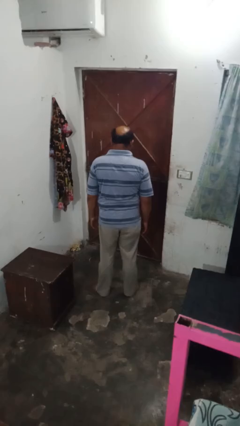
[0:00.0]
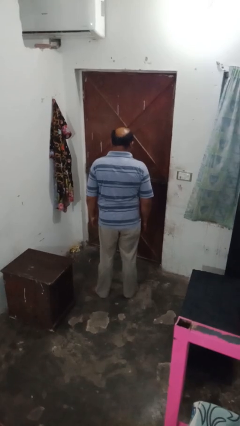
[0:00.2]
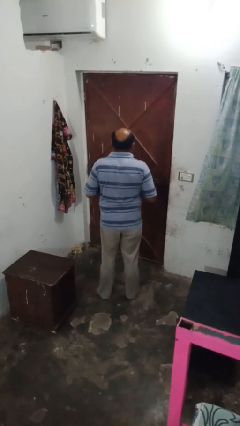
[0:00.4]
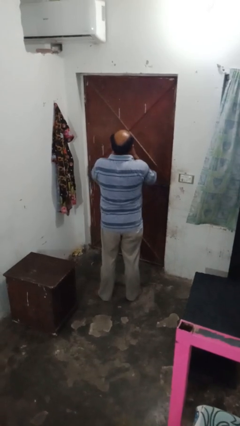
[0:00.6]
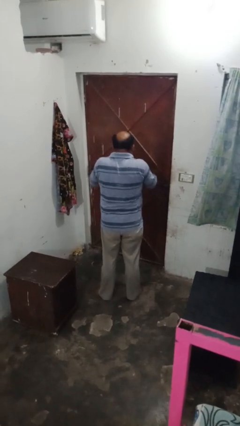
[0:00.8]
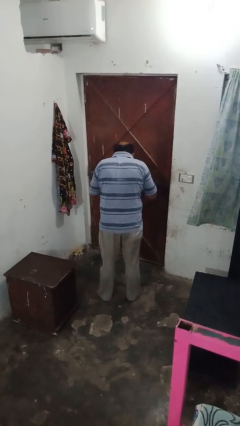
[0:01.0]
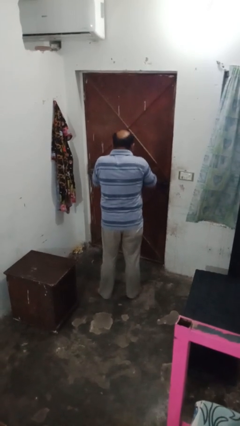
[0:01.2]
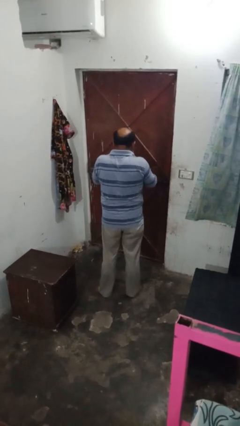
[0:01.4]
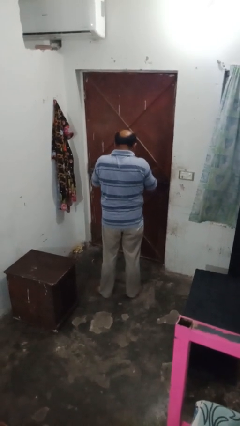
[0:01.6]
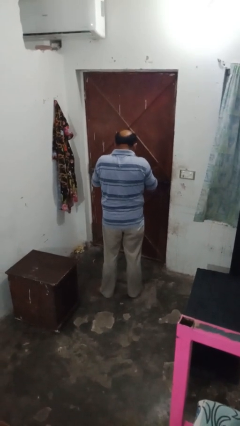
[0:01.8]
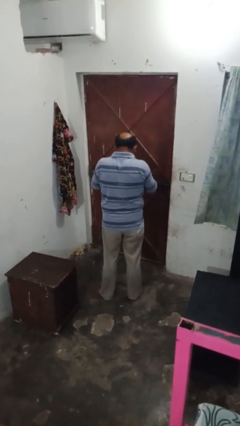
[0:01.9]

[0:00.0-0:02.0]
person blows nose

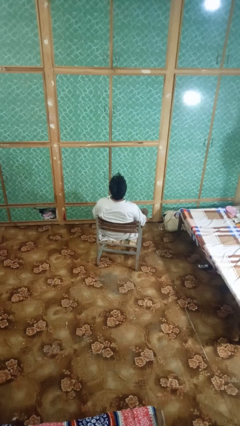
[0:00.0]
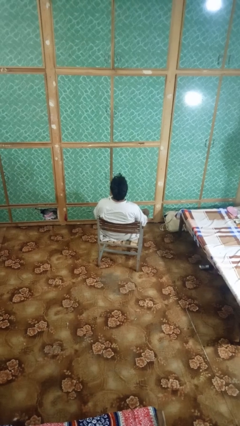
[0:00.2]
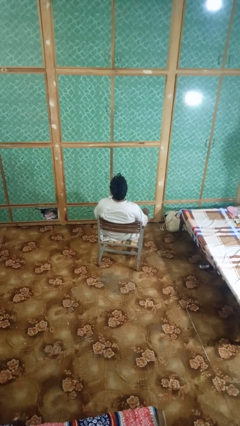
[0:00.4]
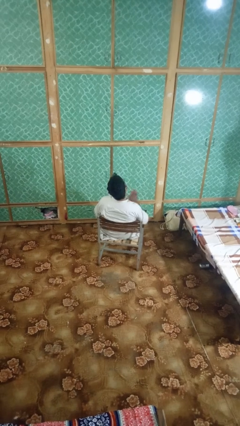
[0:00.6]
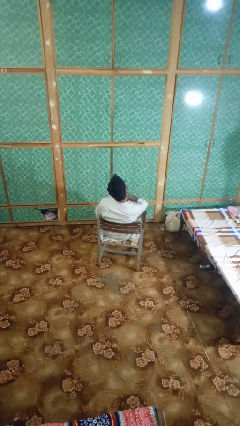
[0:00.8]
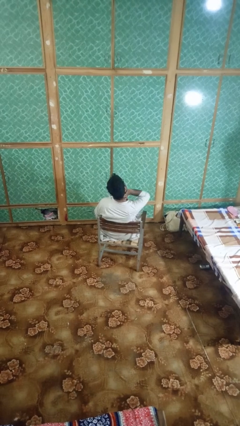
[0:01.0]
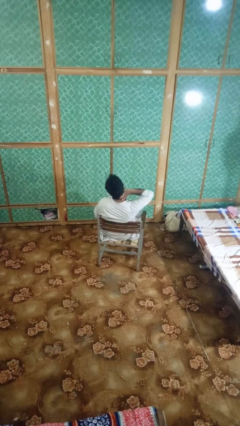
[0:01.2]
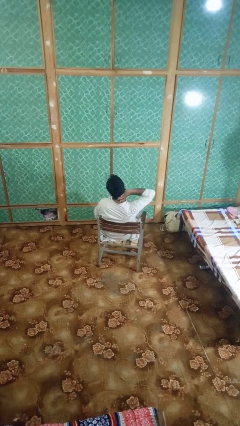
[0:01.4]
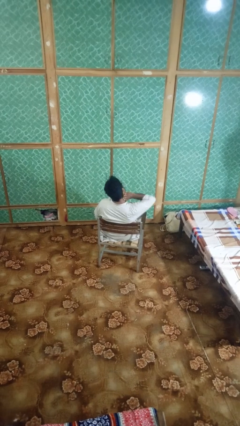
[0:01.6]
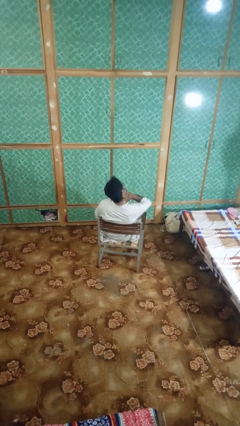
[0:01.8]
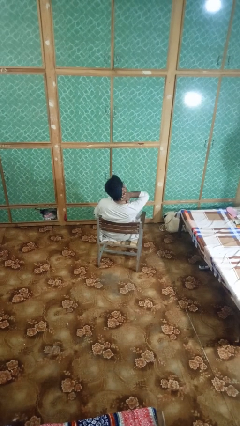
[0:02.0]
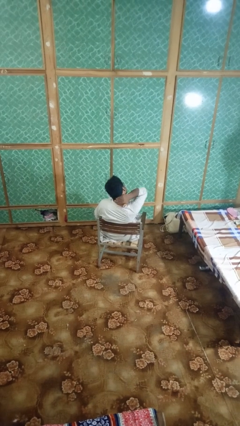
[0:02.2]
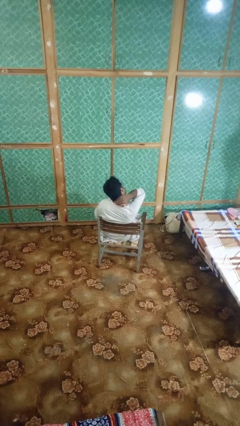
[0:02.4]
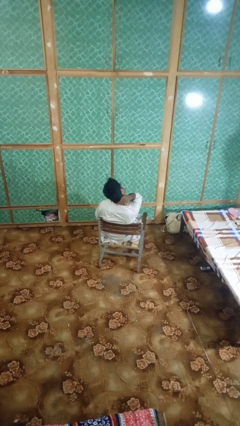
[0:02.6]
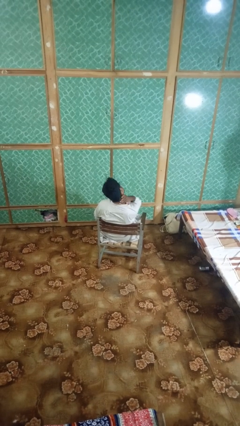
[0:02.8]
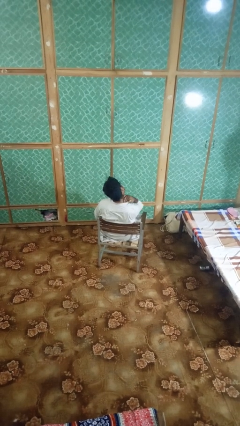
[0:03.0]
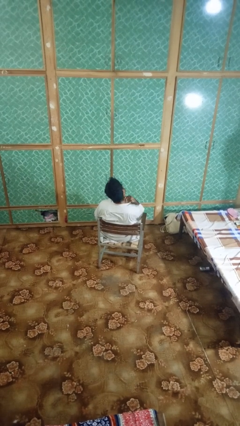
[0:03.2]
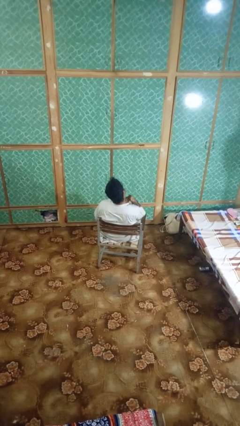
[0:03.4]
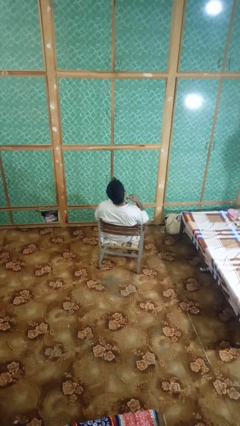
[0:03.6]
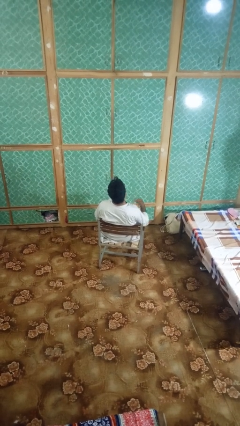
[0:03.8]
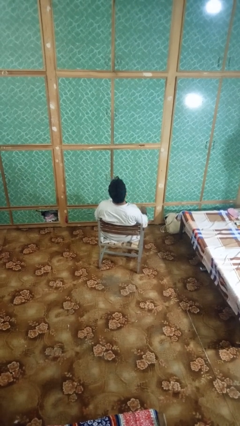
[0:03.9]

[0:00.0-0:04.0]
person rubs neck

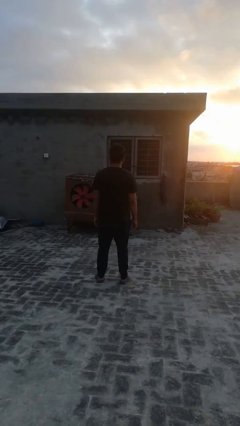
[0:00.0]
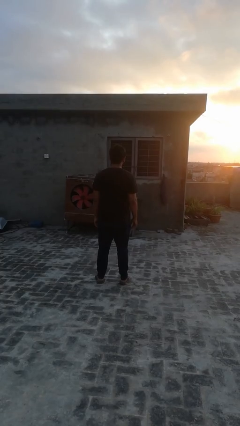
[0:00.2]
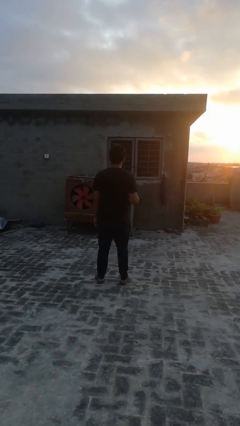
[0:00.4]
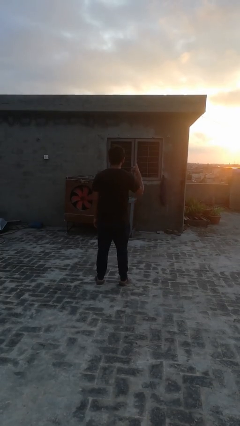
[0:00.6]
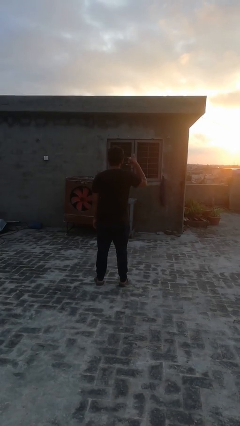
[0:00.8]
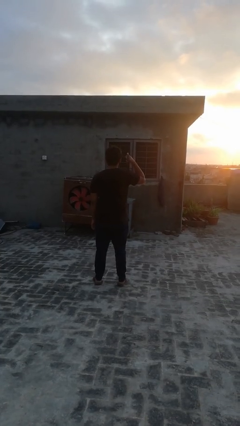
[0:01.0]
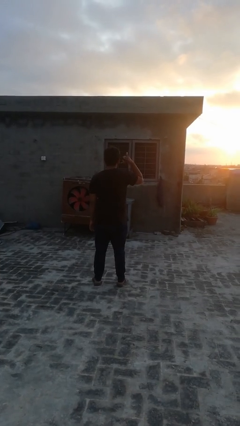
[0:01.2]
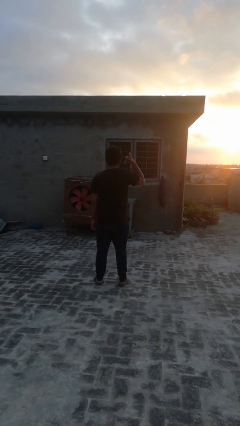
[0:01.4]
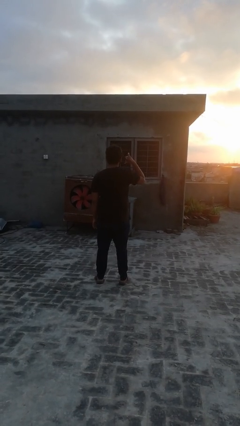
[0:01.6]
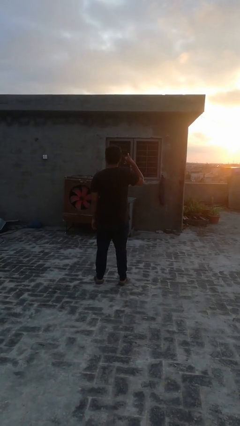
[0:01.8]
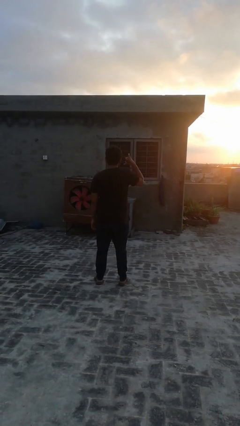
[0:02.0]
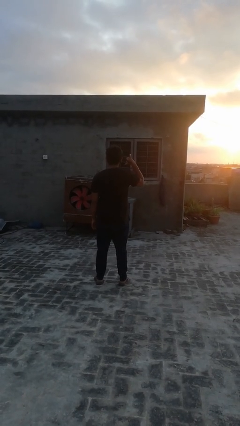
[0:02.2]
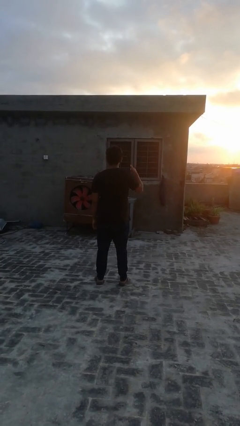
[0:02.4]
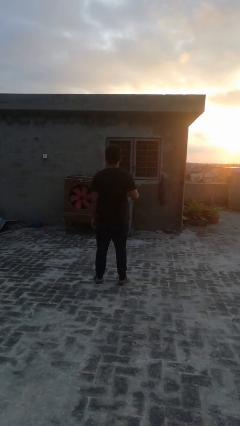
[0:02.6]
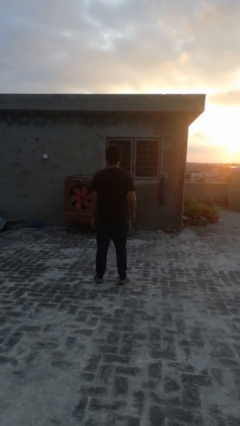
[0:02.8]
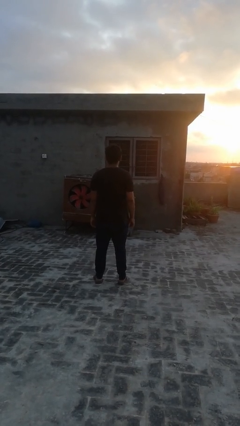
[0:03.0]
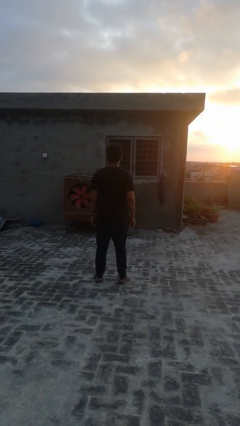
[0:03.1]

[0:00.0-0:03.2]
person gestures hang loose

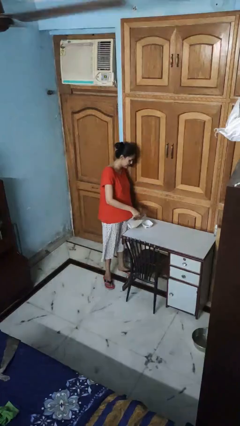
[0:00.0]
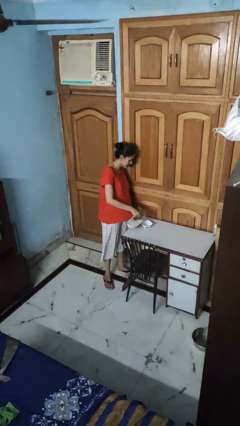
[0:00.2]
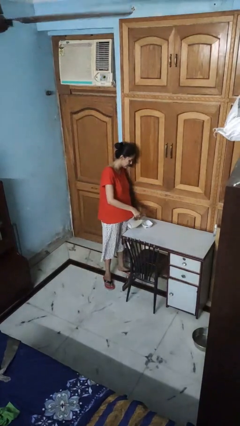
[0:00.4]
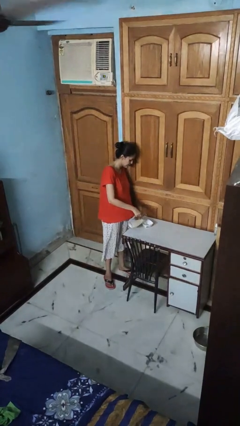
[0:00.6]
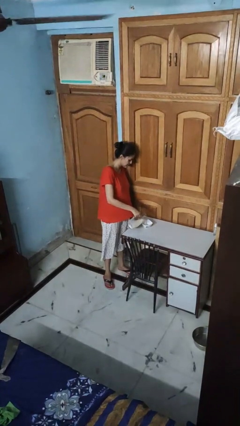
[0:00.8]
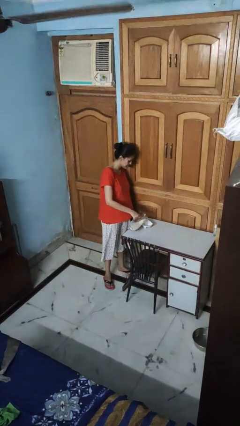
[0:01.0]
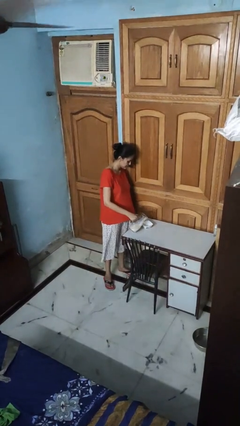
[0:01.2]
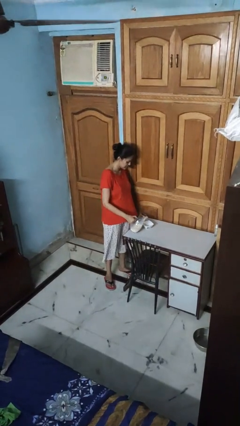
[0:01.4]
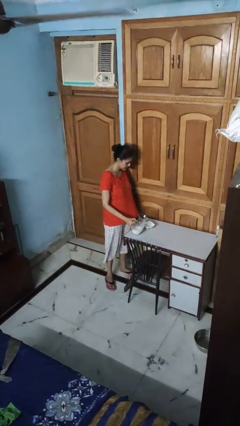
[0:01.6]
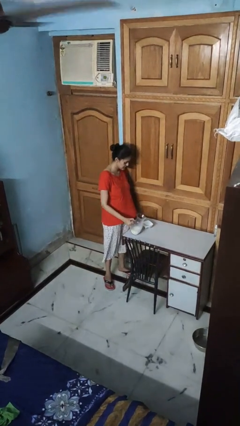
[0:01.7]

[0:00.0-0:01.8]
person pours into bowl

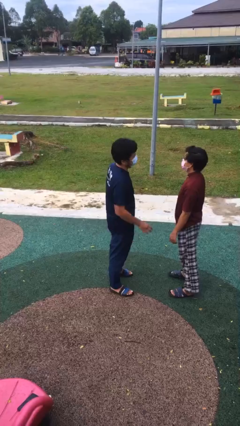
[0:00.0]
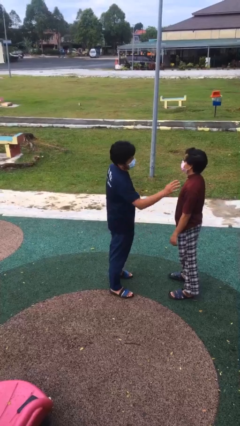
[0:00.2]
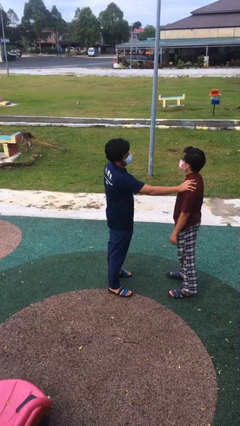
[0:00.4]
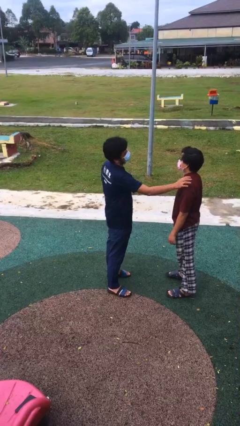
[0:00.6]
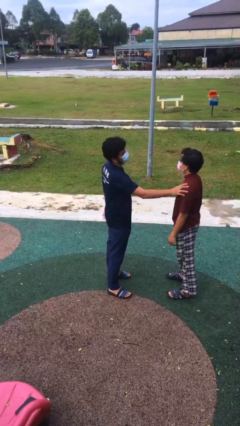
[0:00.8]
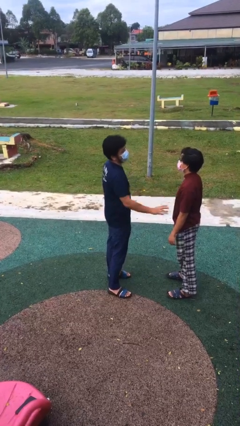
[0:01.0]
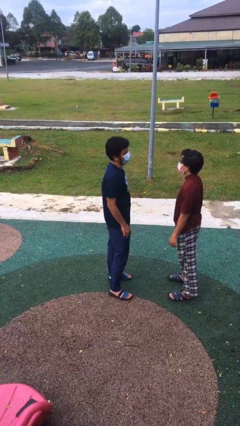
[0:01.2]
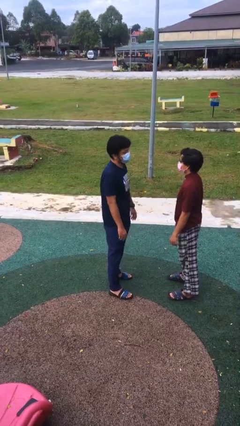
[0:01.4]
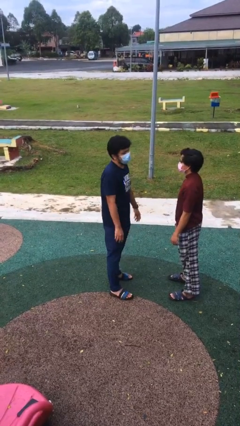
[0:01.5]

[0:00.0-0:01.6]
person pounds shoulders of person

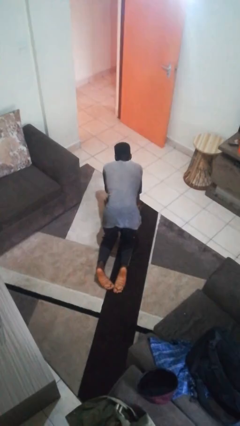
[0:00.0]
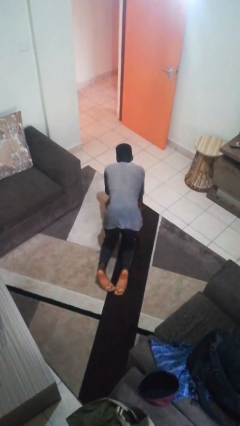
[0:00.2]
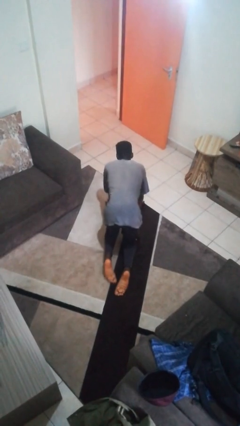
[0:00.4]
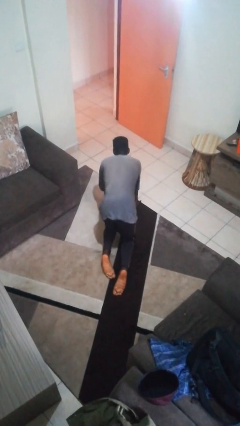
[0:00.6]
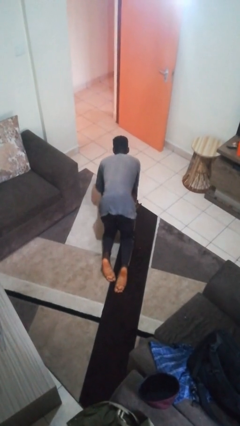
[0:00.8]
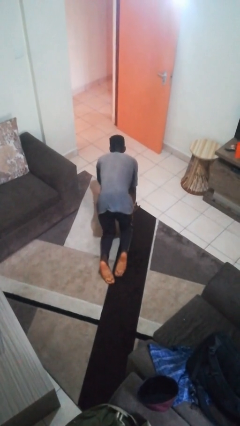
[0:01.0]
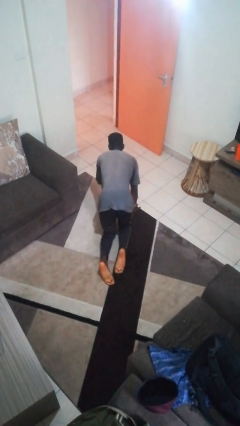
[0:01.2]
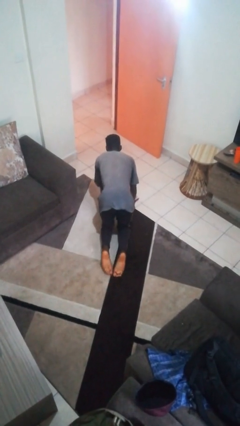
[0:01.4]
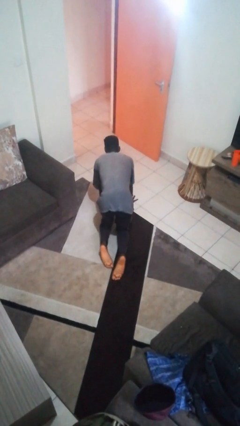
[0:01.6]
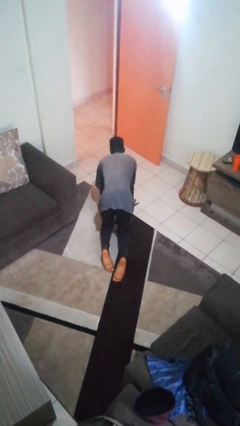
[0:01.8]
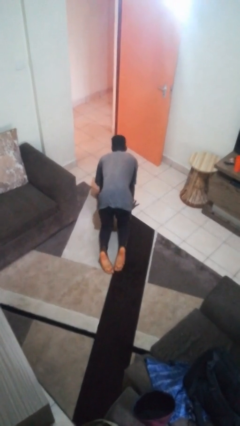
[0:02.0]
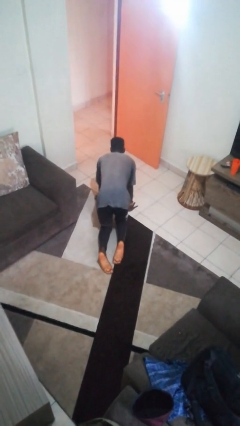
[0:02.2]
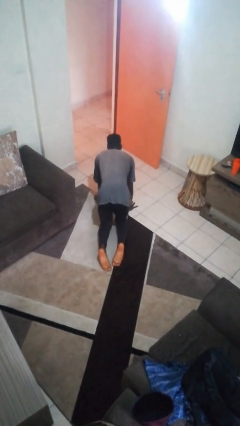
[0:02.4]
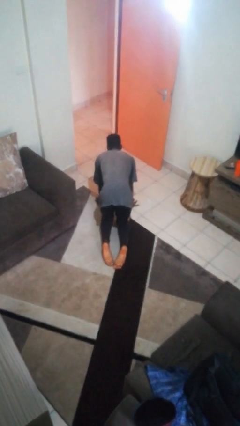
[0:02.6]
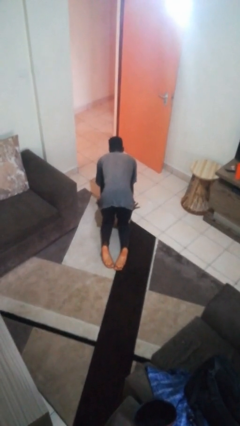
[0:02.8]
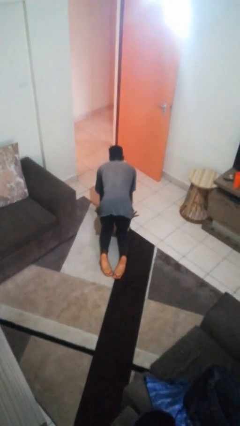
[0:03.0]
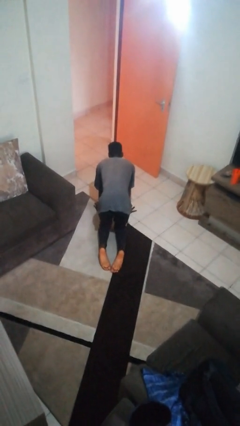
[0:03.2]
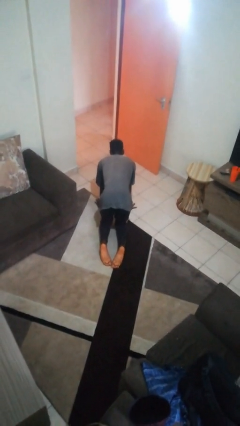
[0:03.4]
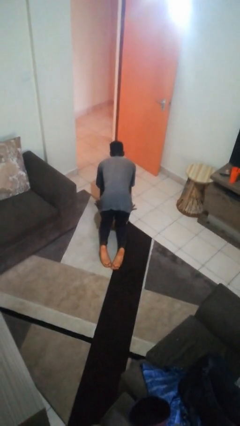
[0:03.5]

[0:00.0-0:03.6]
person crawls

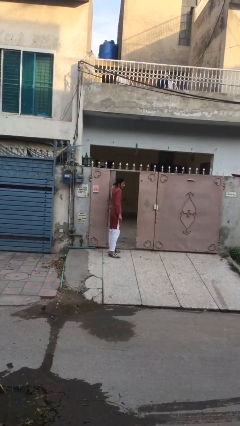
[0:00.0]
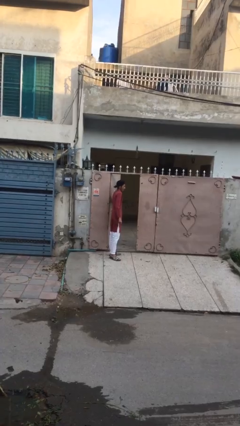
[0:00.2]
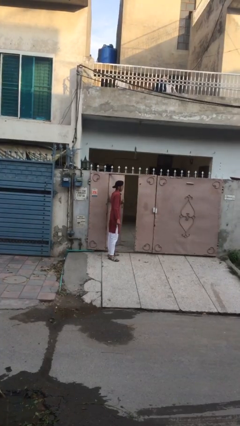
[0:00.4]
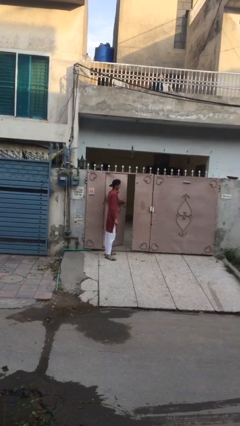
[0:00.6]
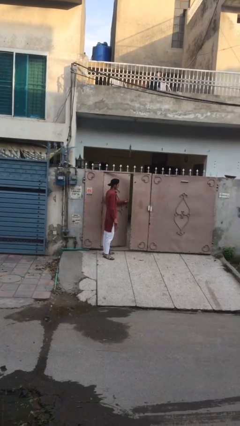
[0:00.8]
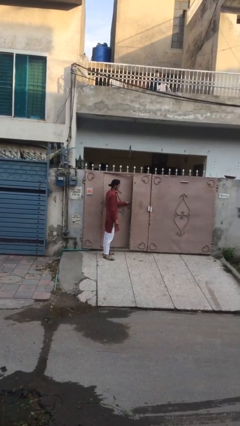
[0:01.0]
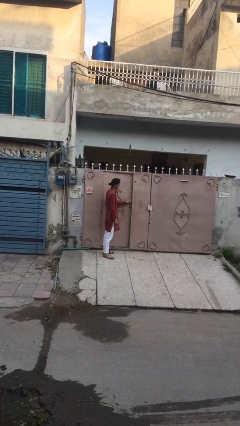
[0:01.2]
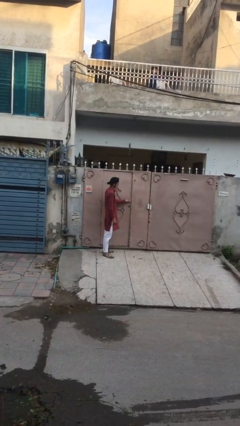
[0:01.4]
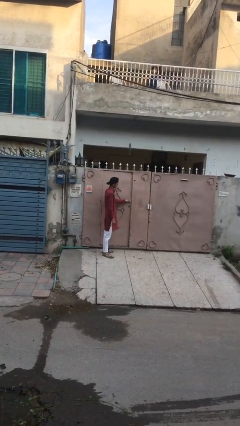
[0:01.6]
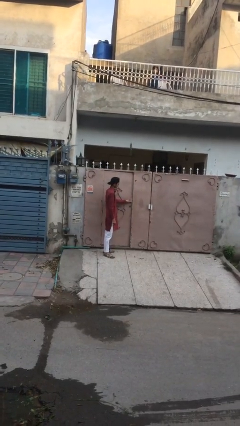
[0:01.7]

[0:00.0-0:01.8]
person closes facility door
